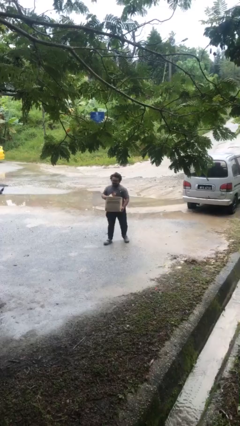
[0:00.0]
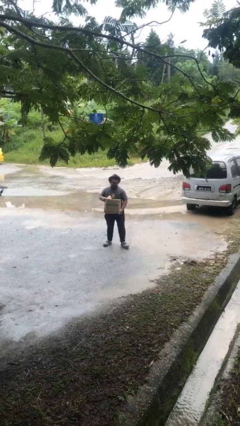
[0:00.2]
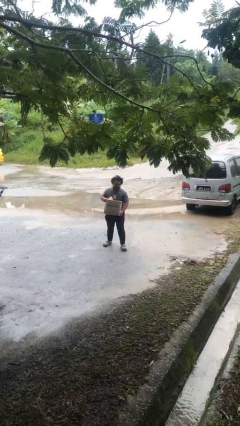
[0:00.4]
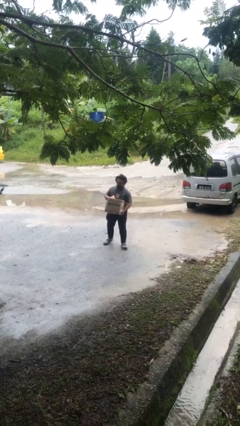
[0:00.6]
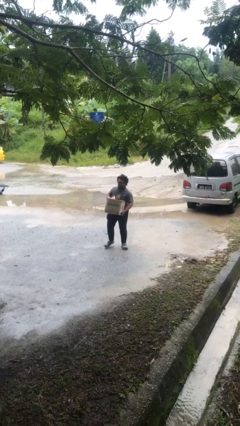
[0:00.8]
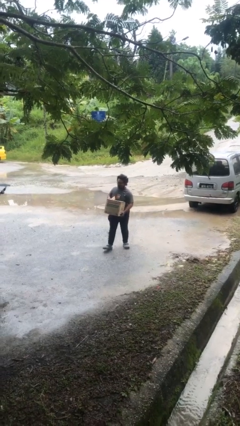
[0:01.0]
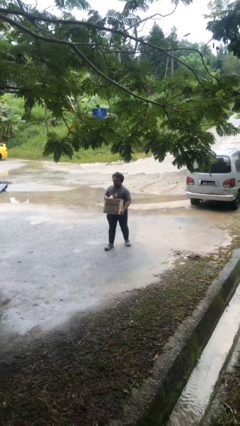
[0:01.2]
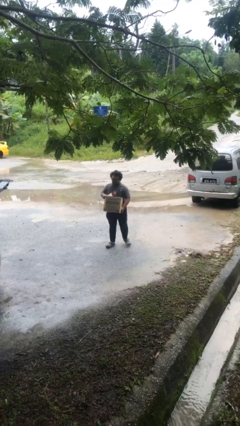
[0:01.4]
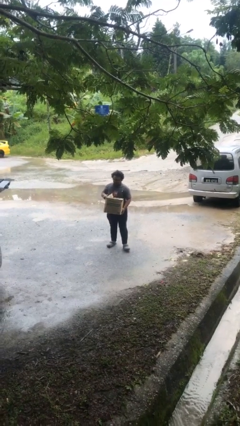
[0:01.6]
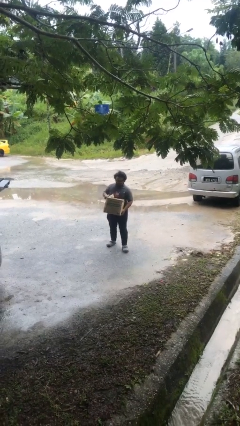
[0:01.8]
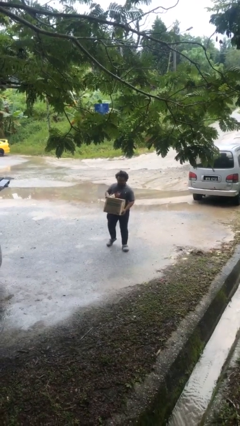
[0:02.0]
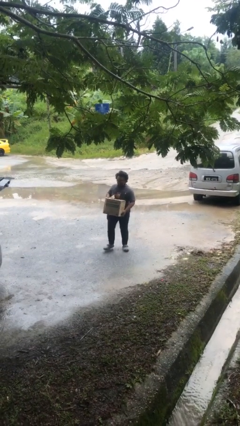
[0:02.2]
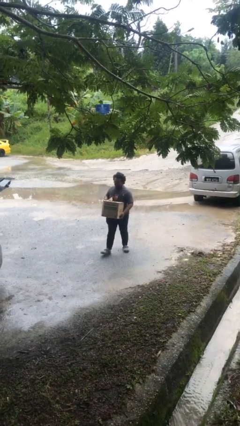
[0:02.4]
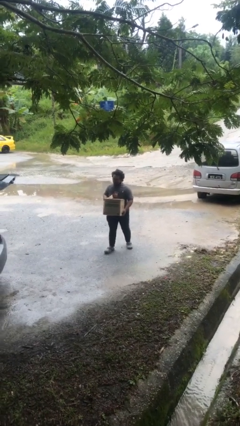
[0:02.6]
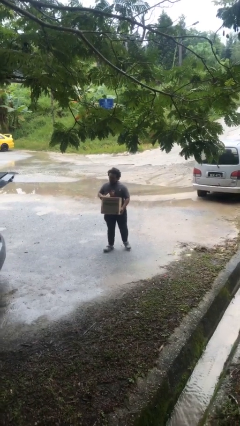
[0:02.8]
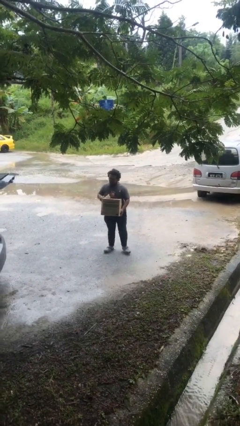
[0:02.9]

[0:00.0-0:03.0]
person carries heavy object

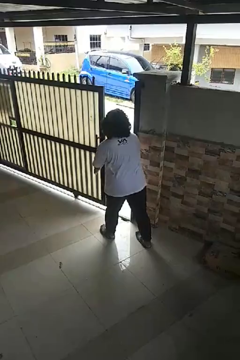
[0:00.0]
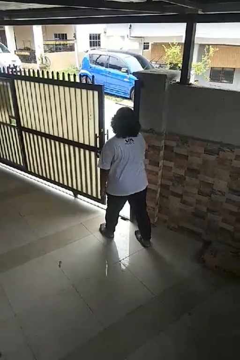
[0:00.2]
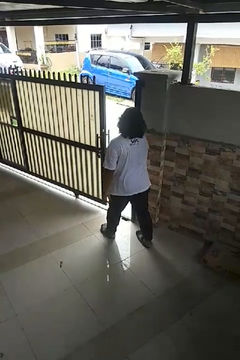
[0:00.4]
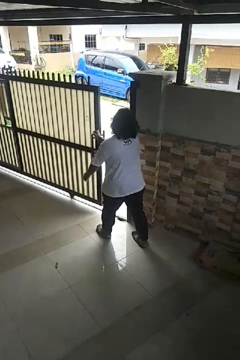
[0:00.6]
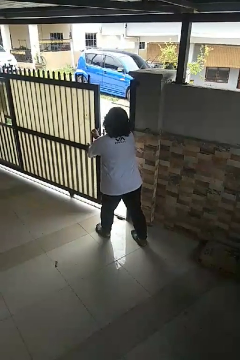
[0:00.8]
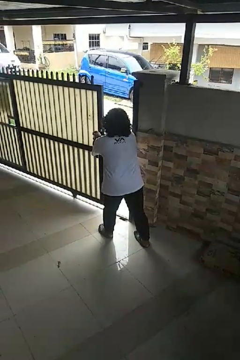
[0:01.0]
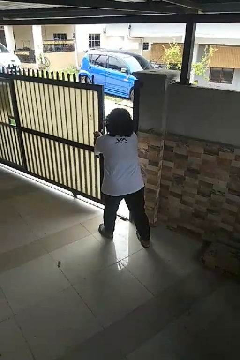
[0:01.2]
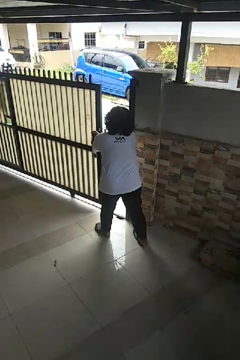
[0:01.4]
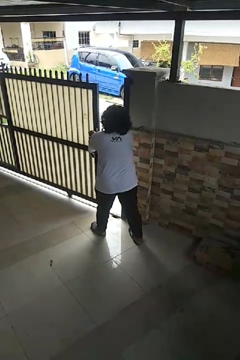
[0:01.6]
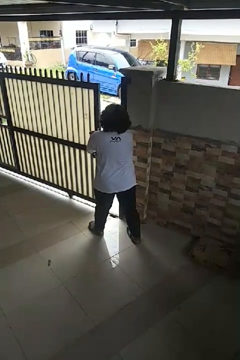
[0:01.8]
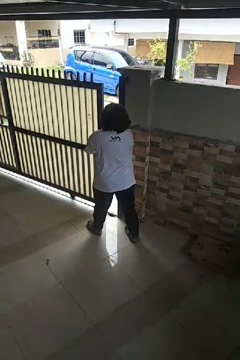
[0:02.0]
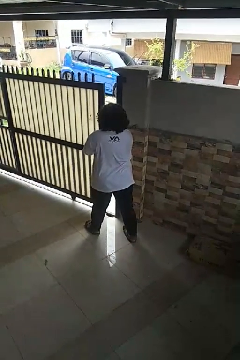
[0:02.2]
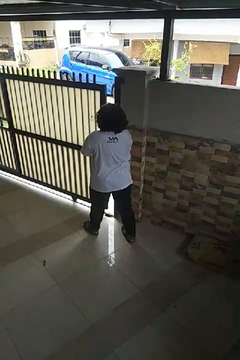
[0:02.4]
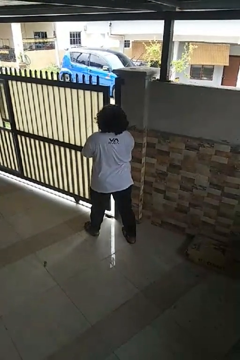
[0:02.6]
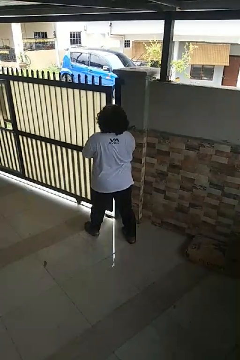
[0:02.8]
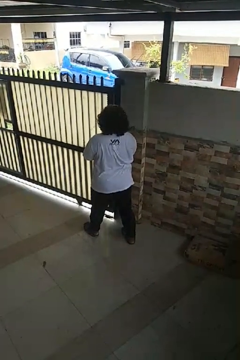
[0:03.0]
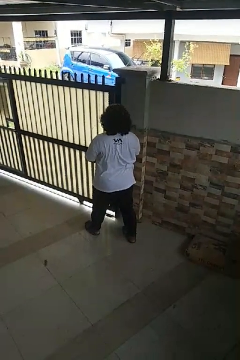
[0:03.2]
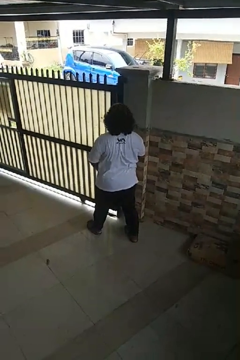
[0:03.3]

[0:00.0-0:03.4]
person closes sliding door

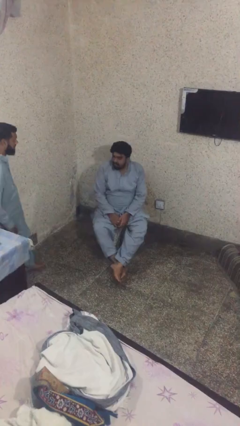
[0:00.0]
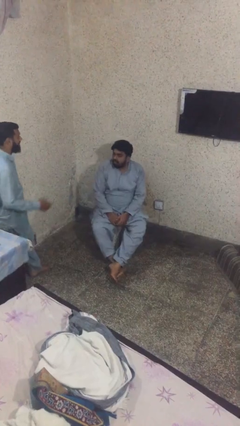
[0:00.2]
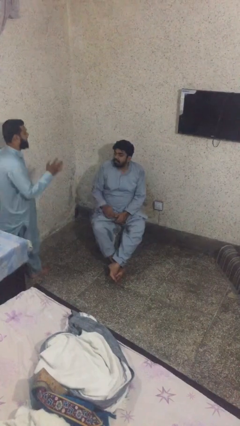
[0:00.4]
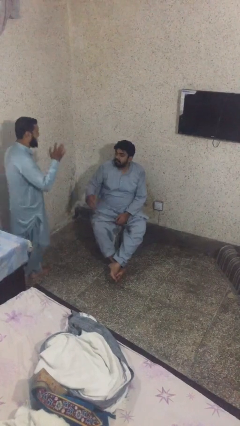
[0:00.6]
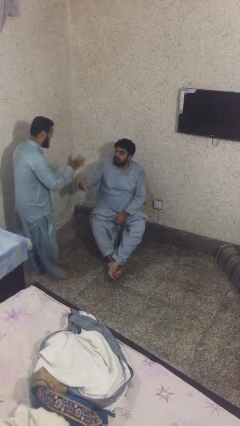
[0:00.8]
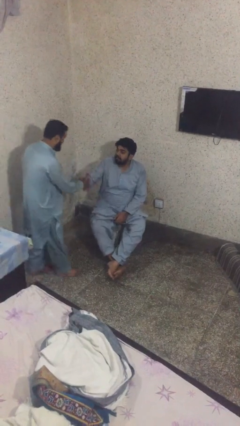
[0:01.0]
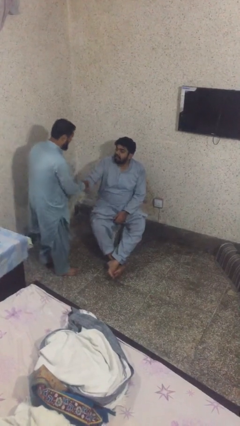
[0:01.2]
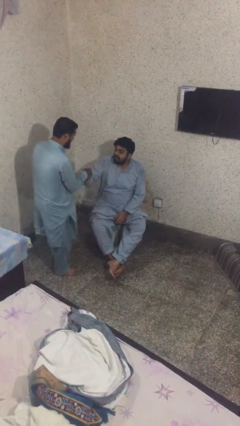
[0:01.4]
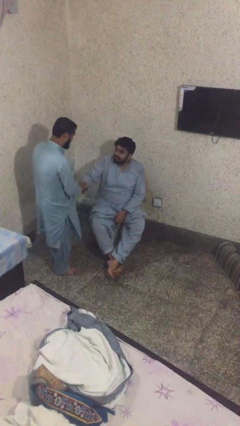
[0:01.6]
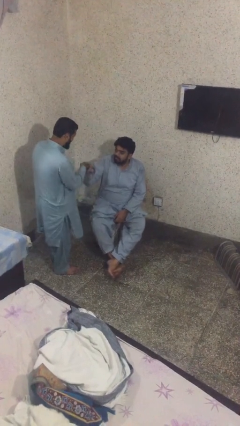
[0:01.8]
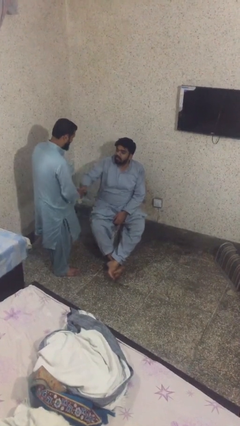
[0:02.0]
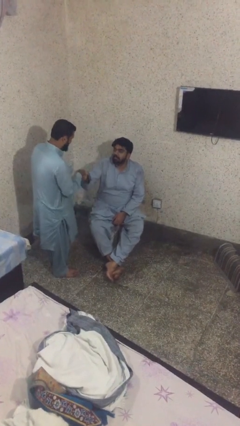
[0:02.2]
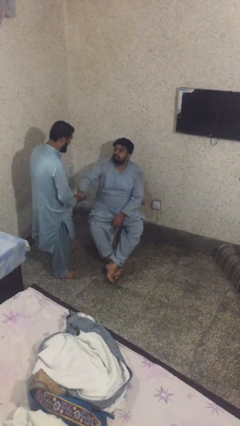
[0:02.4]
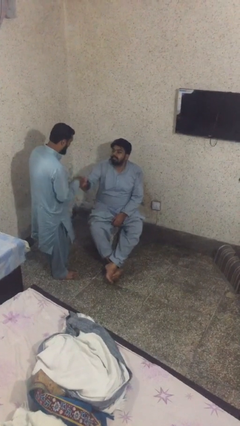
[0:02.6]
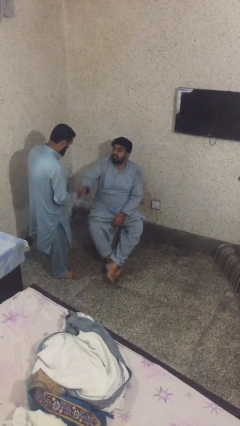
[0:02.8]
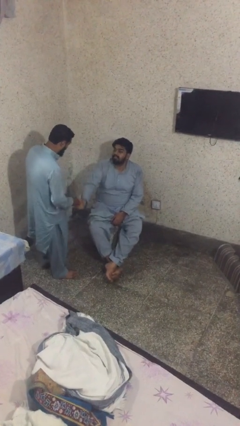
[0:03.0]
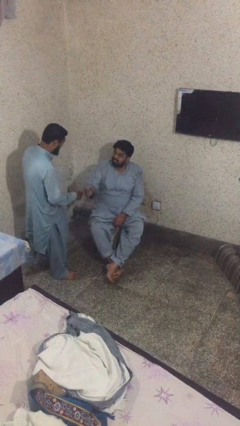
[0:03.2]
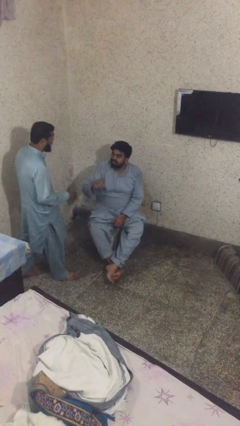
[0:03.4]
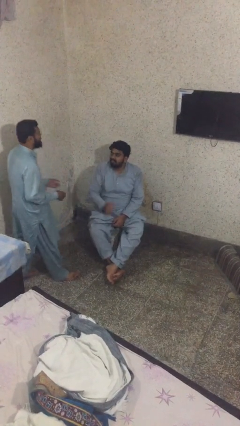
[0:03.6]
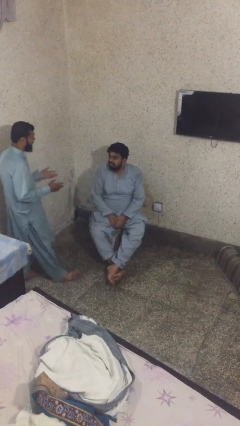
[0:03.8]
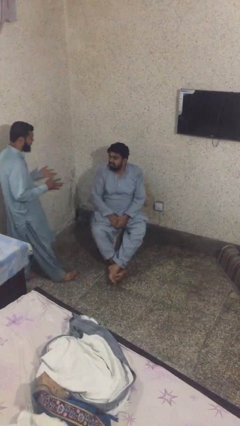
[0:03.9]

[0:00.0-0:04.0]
person shakes hand

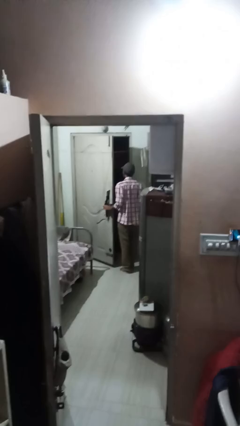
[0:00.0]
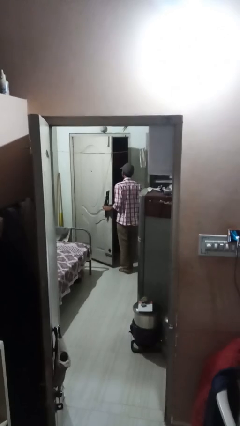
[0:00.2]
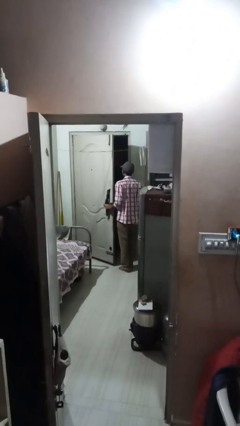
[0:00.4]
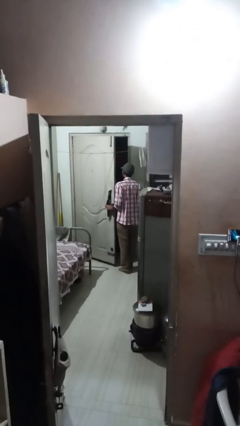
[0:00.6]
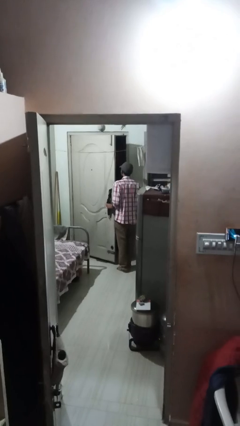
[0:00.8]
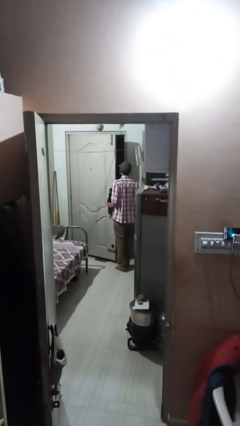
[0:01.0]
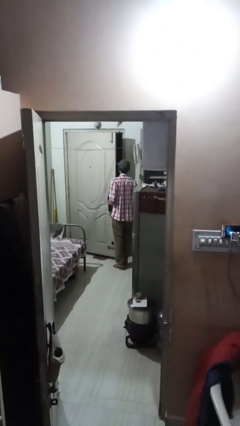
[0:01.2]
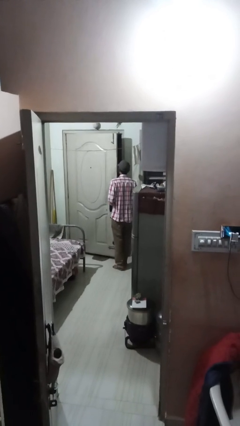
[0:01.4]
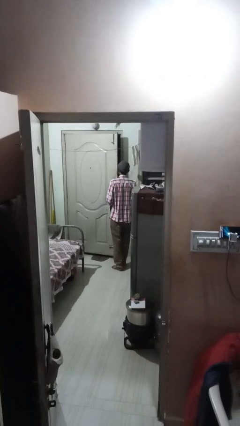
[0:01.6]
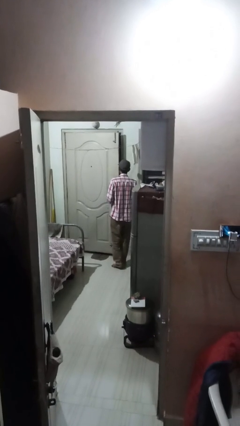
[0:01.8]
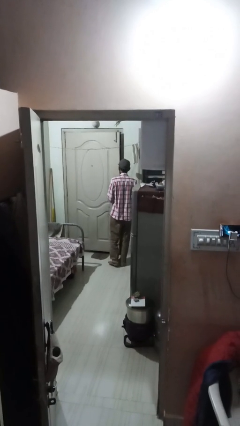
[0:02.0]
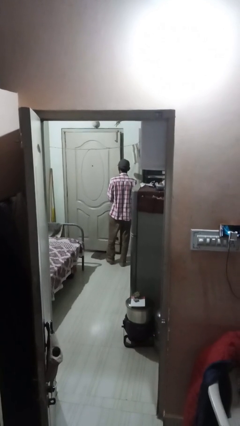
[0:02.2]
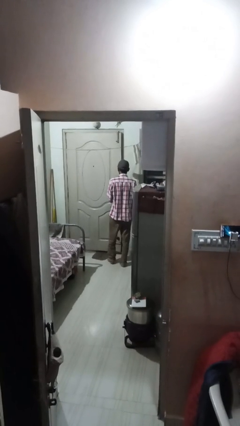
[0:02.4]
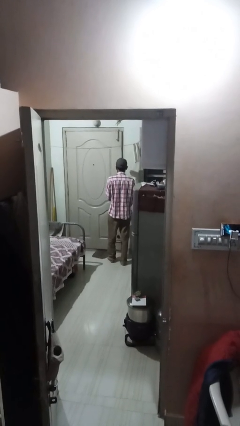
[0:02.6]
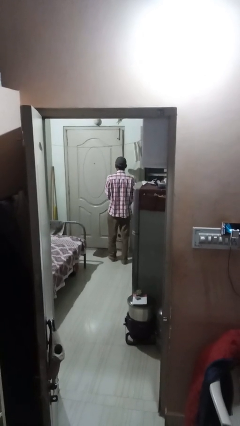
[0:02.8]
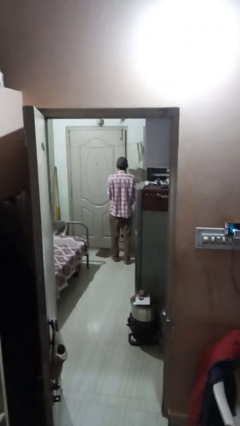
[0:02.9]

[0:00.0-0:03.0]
person closes facility door

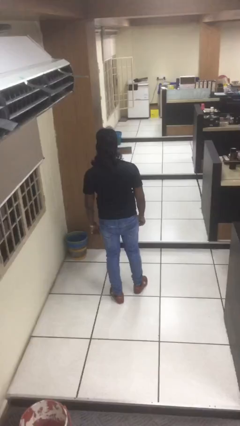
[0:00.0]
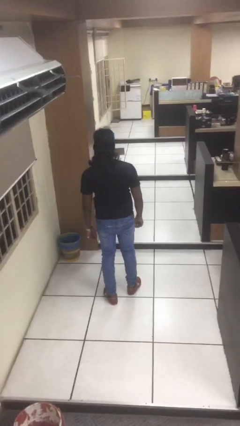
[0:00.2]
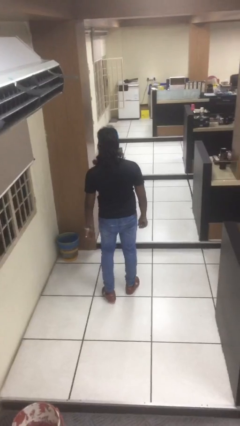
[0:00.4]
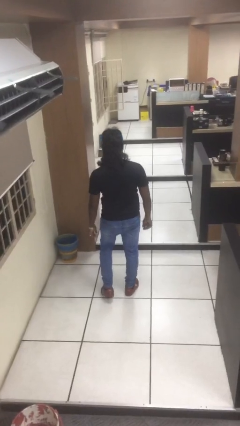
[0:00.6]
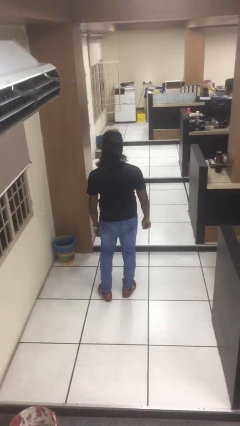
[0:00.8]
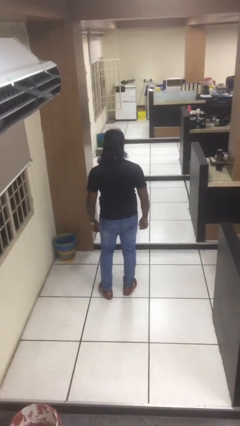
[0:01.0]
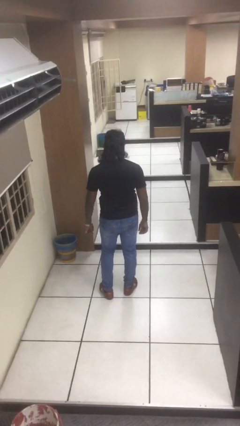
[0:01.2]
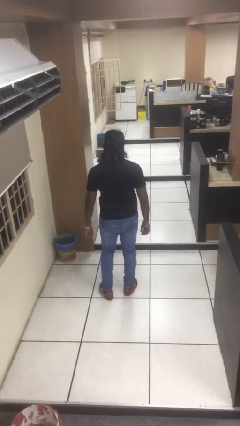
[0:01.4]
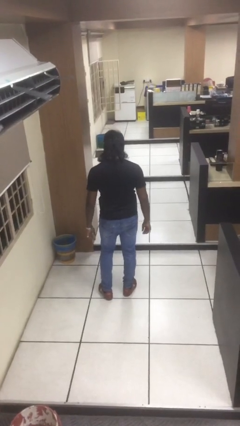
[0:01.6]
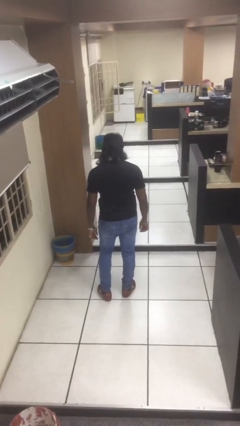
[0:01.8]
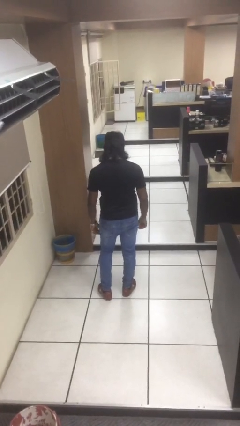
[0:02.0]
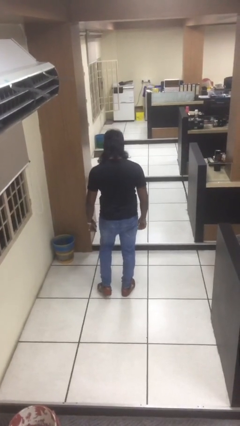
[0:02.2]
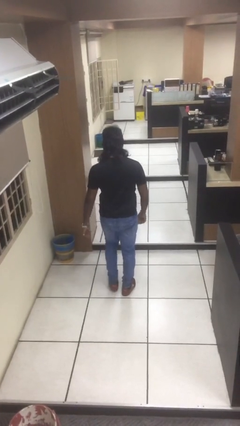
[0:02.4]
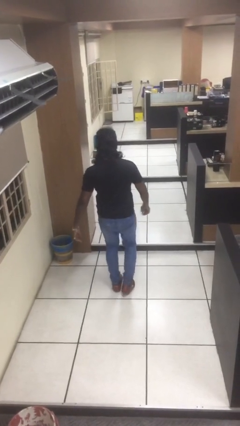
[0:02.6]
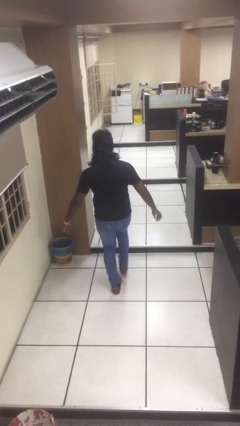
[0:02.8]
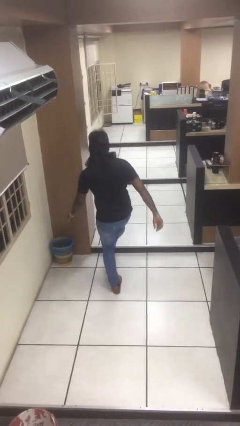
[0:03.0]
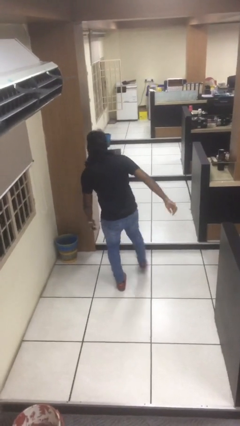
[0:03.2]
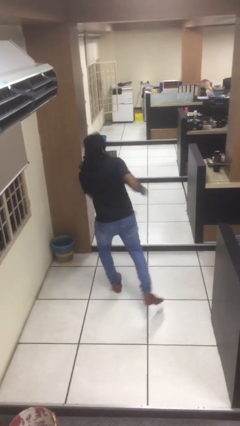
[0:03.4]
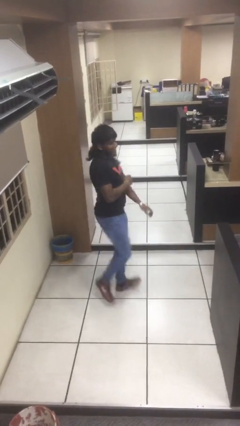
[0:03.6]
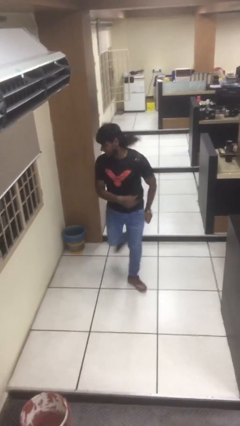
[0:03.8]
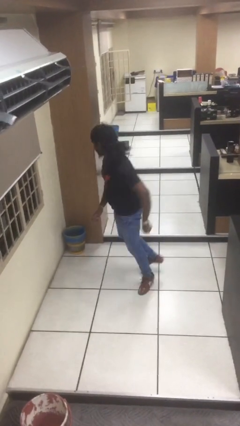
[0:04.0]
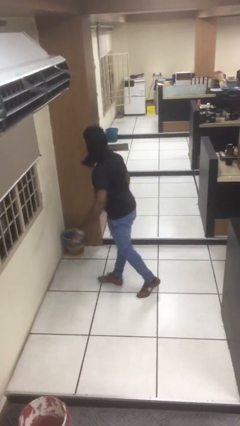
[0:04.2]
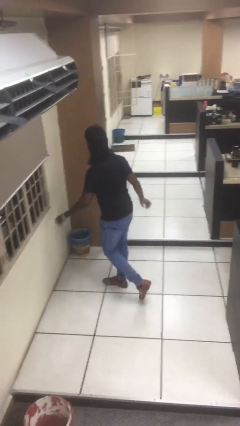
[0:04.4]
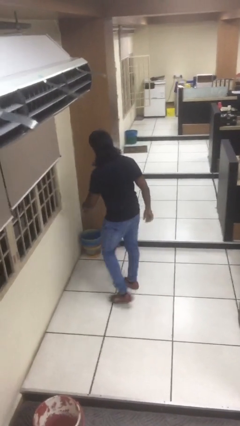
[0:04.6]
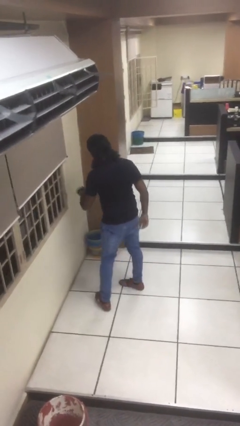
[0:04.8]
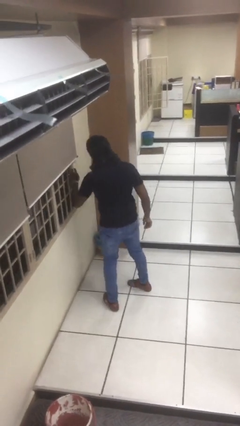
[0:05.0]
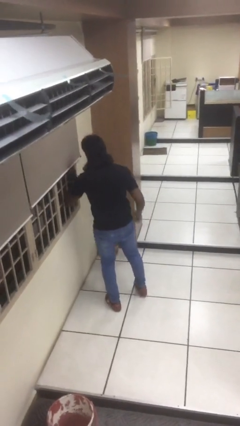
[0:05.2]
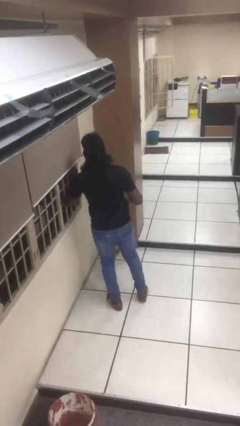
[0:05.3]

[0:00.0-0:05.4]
person twirls
